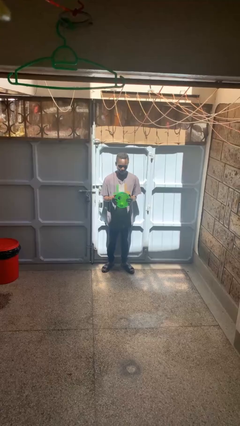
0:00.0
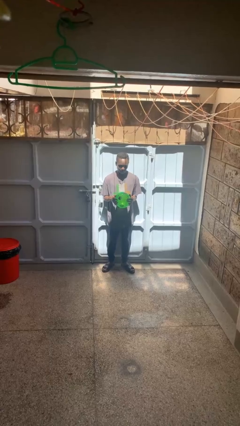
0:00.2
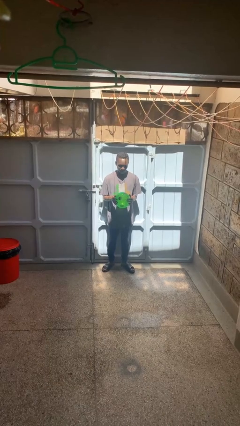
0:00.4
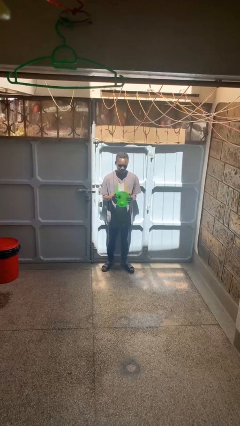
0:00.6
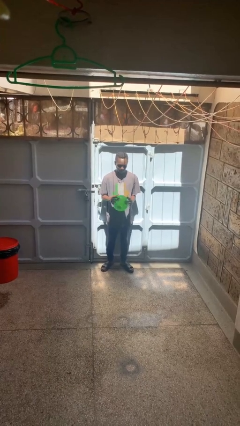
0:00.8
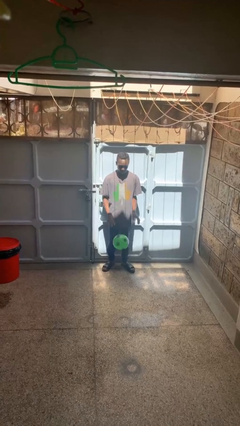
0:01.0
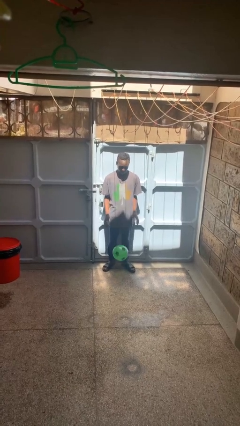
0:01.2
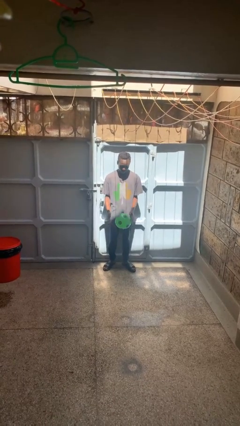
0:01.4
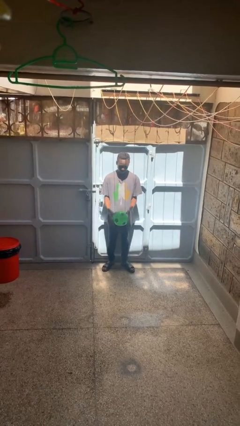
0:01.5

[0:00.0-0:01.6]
person bounces ball on floor

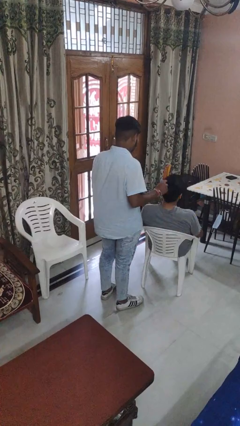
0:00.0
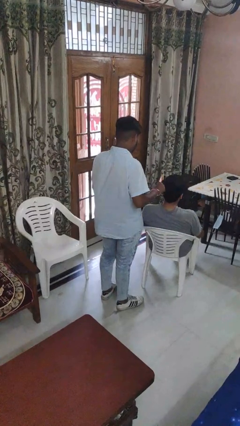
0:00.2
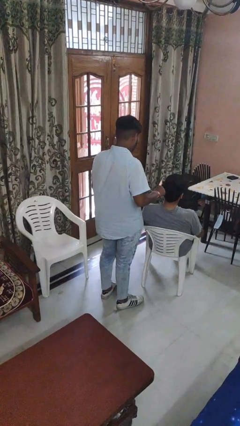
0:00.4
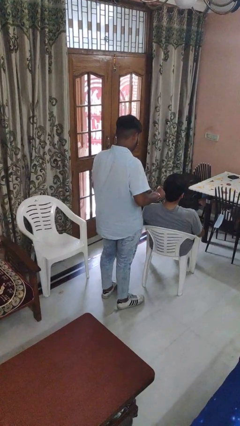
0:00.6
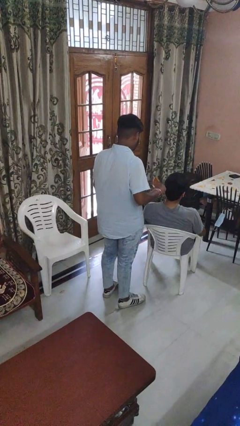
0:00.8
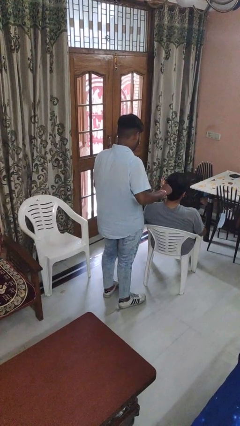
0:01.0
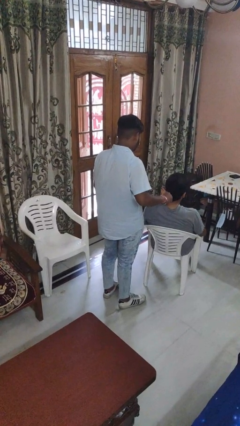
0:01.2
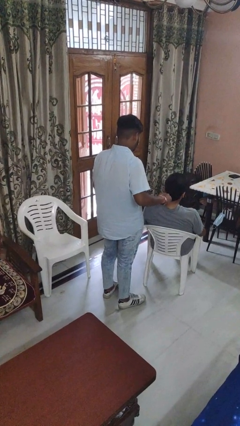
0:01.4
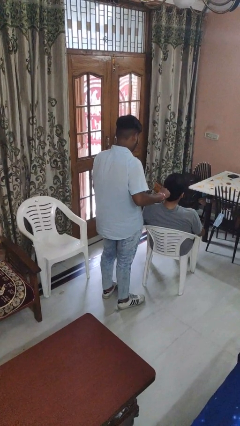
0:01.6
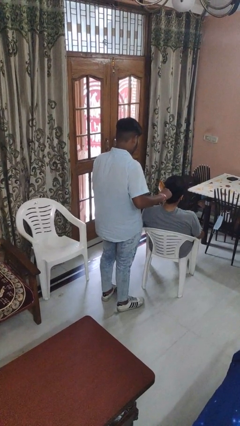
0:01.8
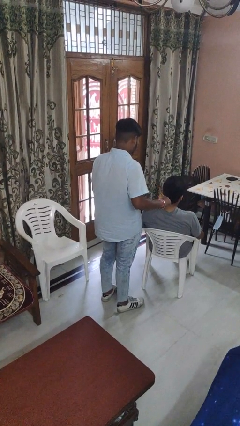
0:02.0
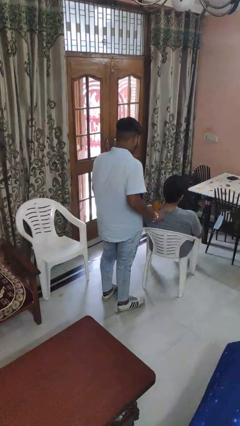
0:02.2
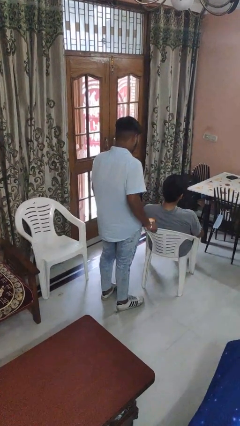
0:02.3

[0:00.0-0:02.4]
person brushes hair of person

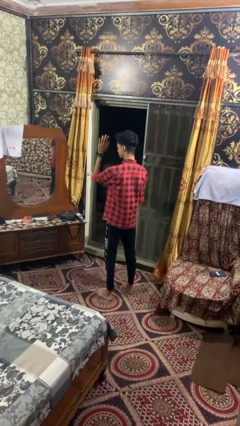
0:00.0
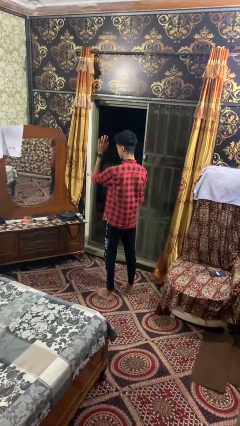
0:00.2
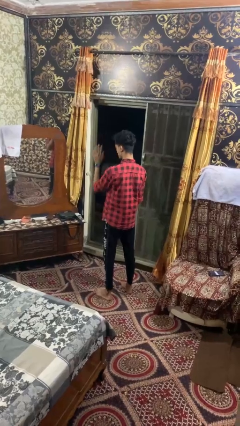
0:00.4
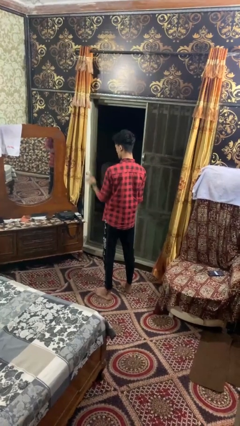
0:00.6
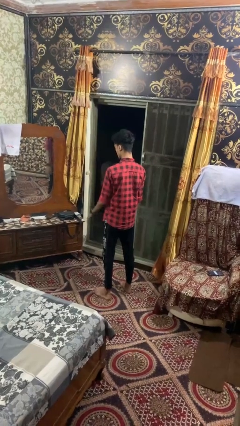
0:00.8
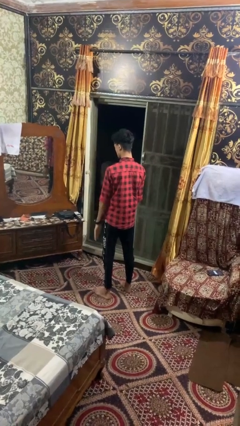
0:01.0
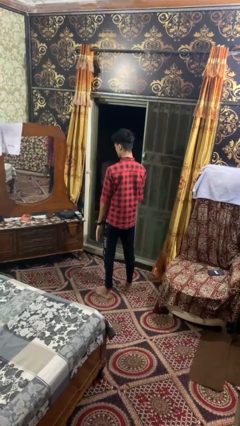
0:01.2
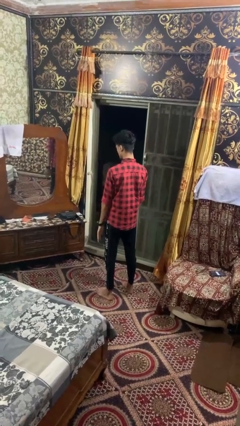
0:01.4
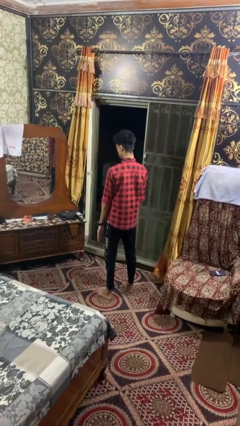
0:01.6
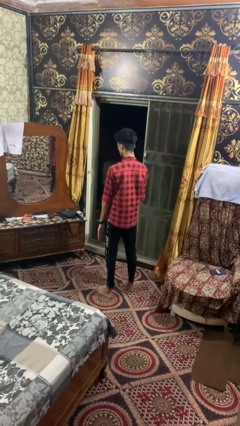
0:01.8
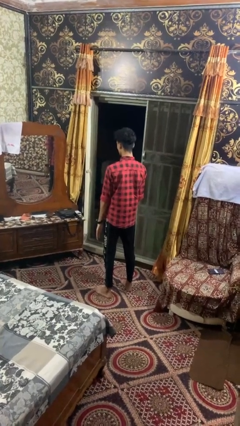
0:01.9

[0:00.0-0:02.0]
person gestures lower hand

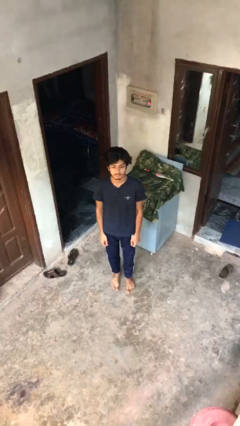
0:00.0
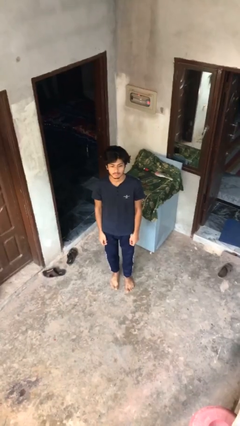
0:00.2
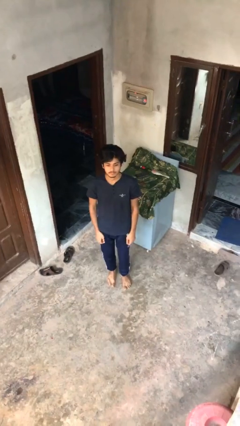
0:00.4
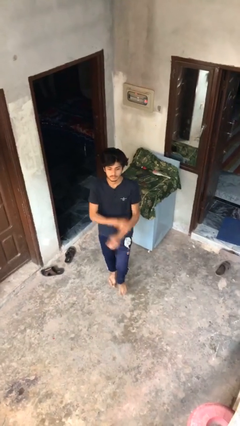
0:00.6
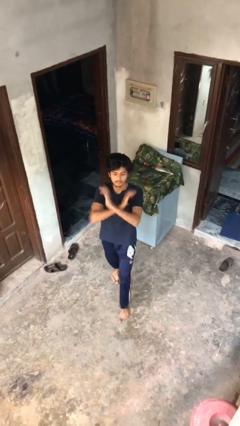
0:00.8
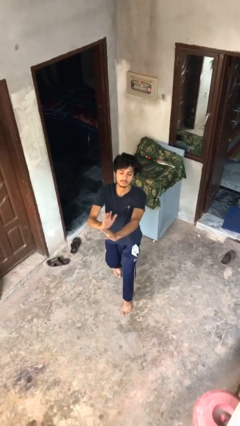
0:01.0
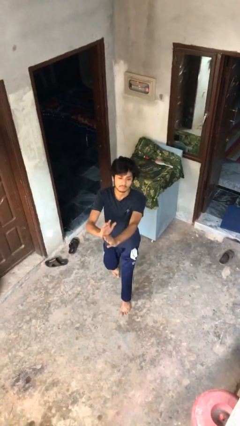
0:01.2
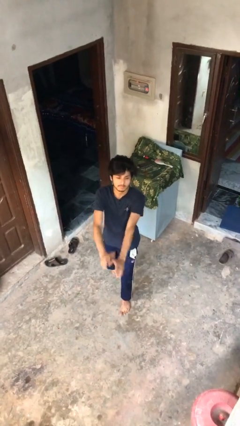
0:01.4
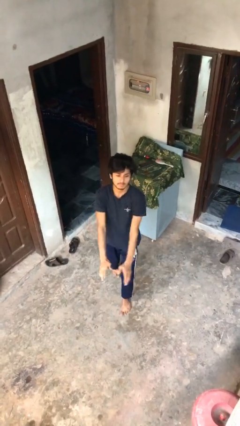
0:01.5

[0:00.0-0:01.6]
person karate chop

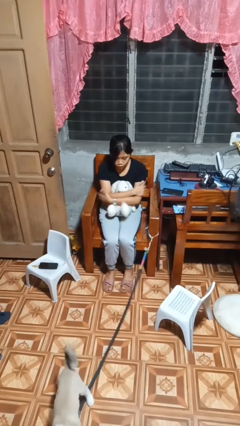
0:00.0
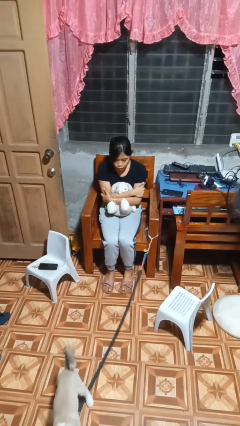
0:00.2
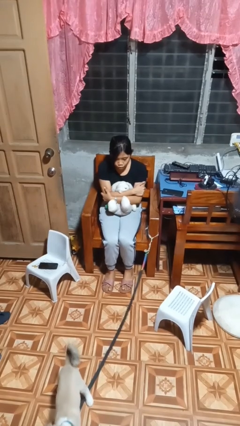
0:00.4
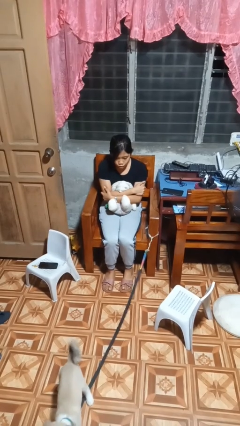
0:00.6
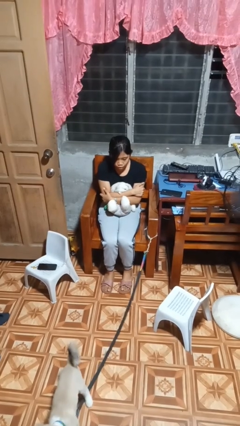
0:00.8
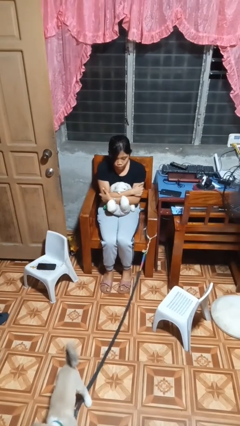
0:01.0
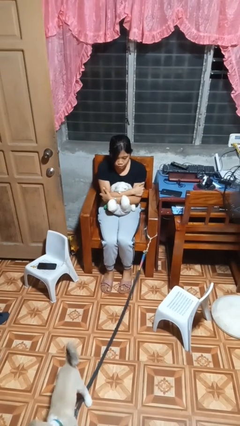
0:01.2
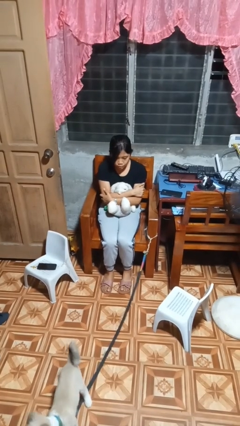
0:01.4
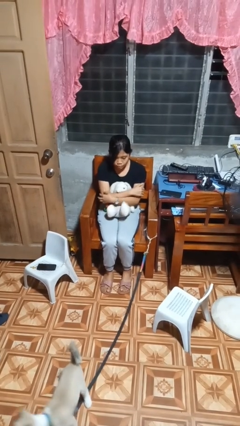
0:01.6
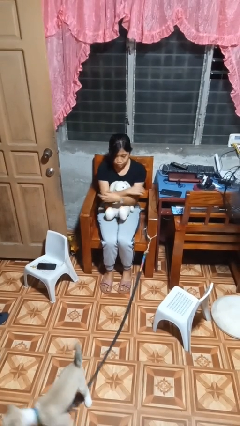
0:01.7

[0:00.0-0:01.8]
person hugs stuffed animal

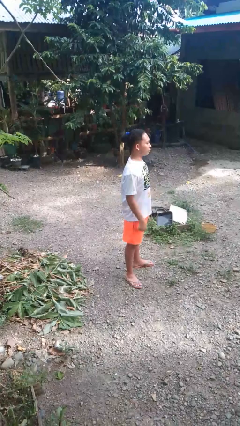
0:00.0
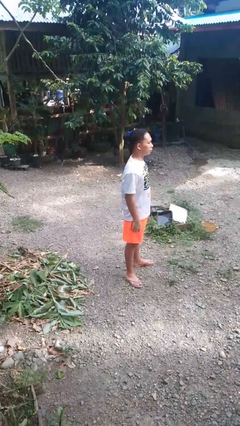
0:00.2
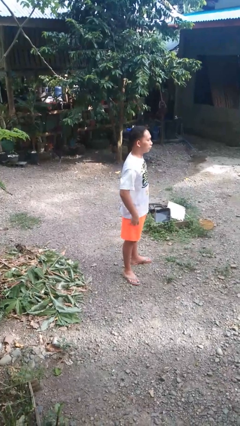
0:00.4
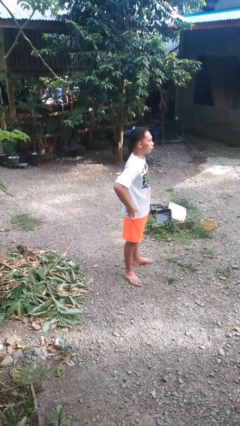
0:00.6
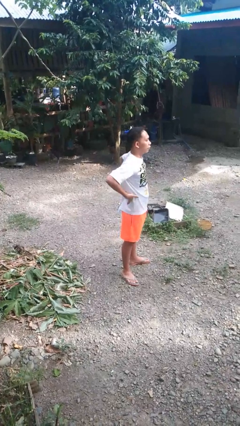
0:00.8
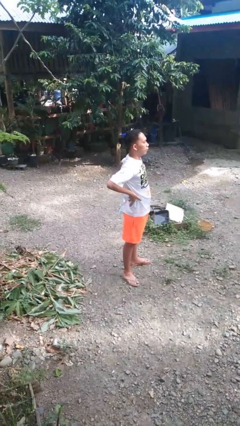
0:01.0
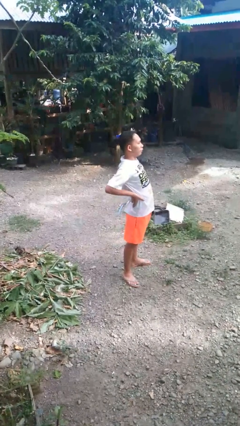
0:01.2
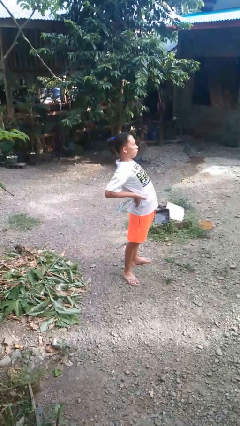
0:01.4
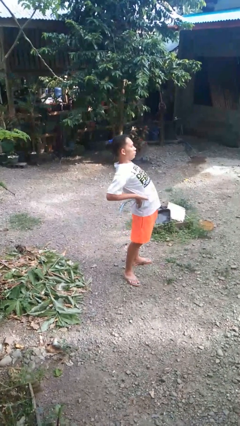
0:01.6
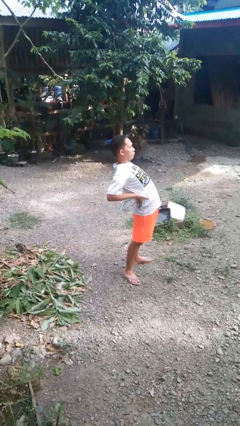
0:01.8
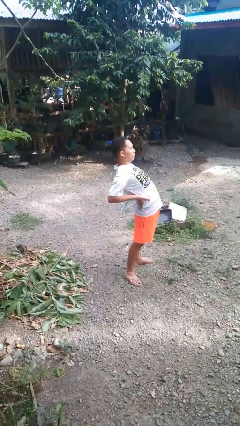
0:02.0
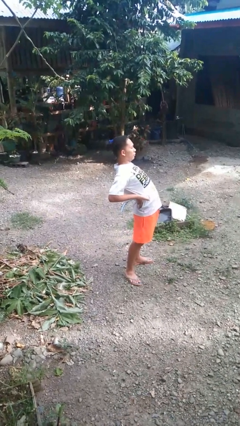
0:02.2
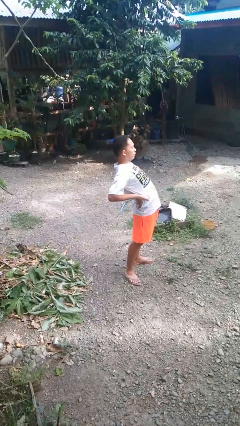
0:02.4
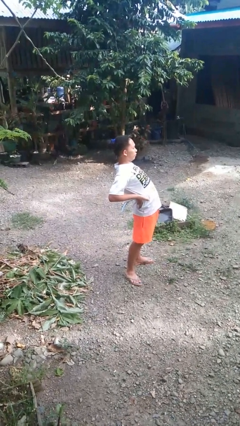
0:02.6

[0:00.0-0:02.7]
person stretches back

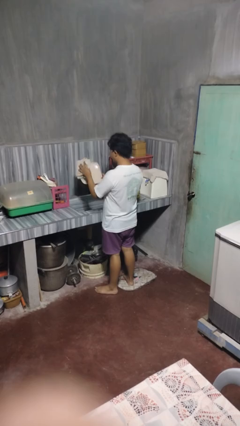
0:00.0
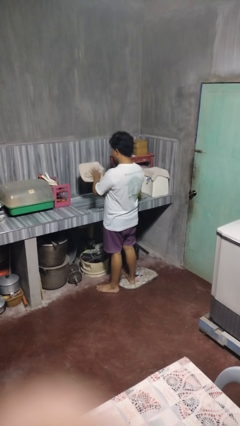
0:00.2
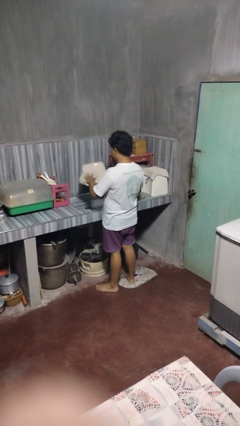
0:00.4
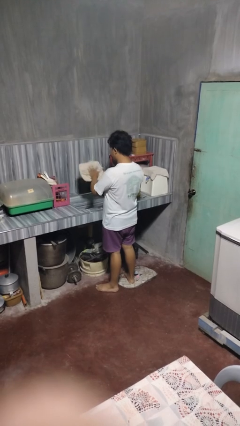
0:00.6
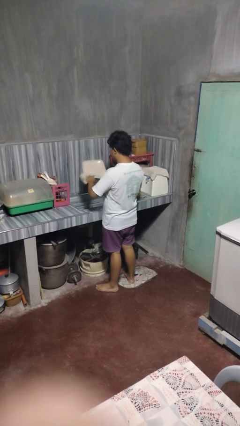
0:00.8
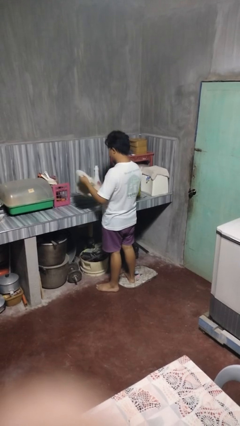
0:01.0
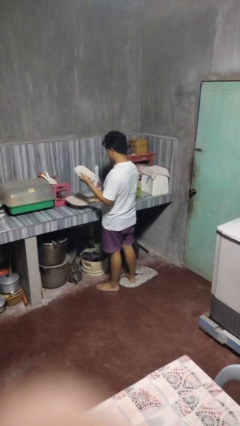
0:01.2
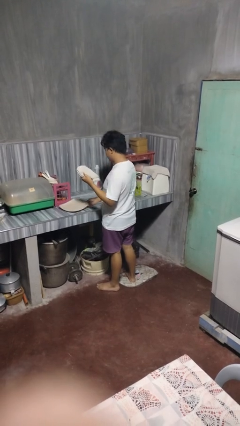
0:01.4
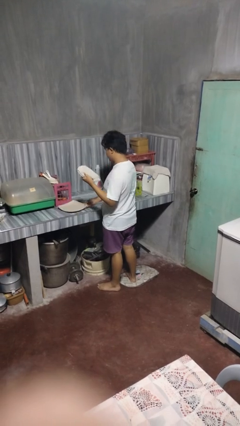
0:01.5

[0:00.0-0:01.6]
person dries dish

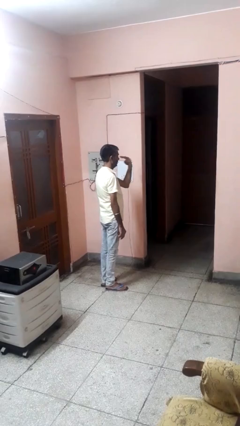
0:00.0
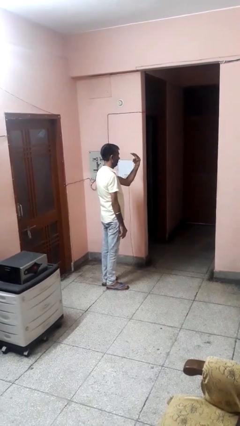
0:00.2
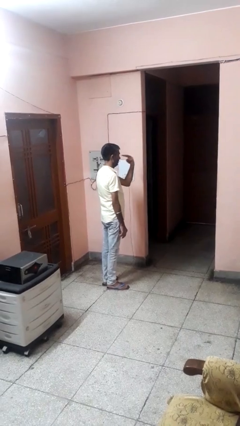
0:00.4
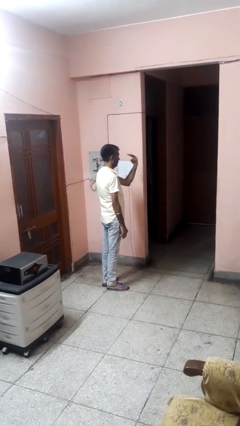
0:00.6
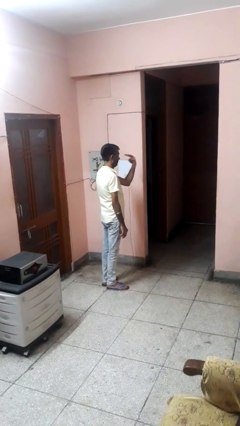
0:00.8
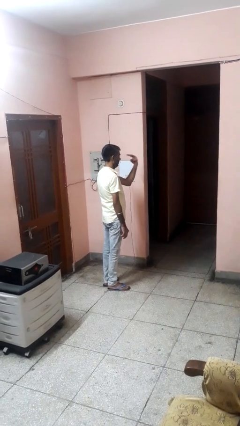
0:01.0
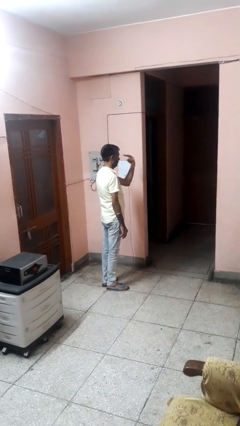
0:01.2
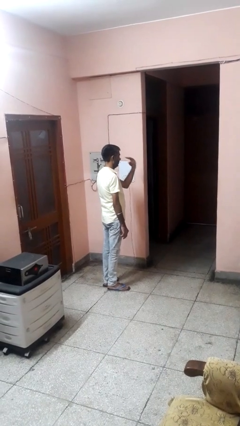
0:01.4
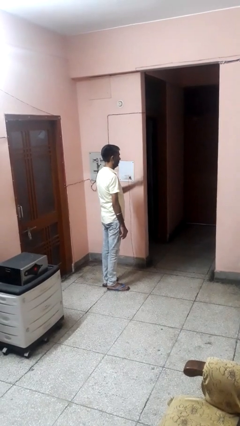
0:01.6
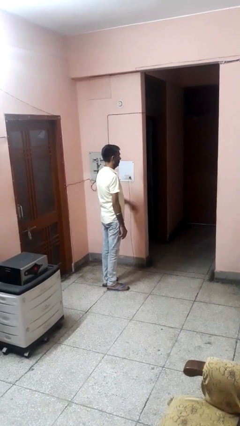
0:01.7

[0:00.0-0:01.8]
person gestures watch closely

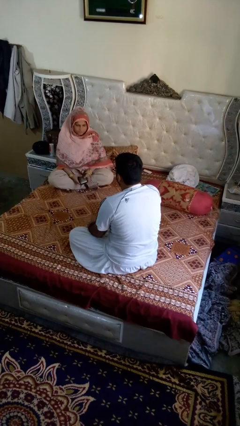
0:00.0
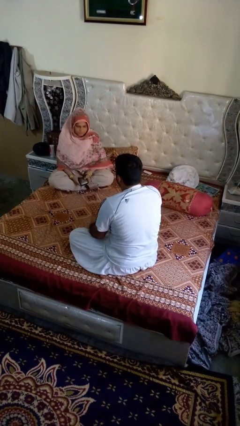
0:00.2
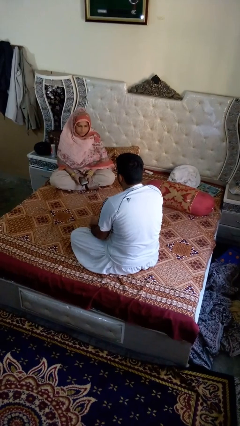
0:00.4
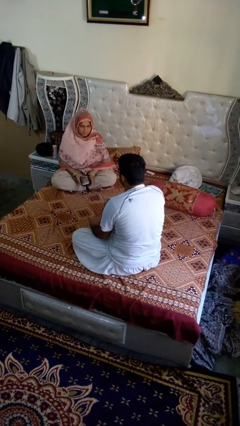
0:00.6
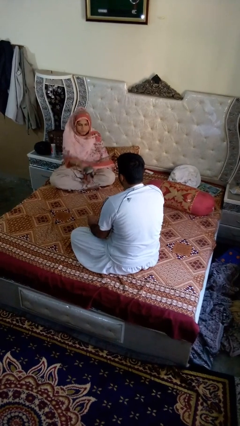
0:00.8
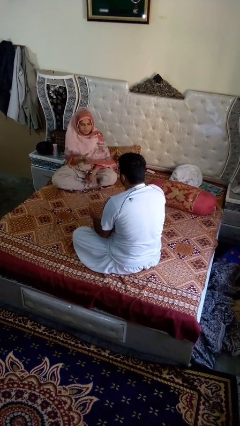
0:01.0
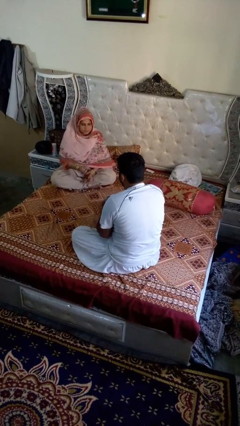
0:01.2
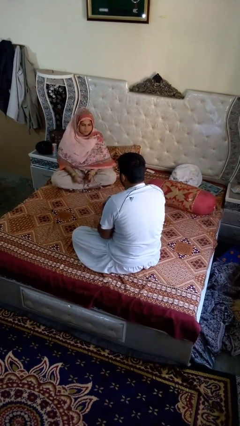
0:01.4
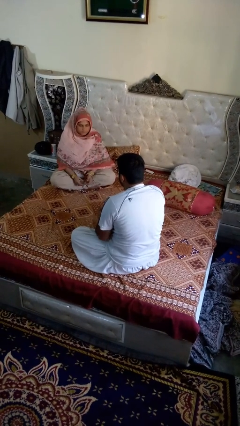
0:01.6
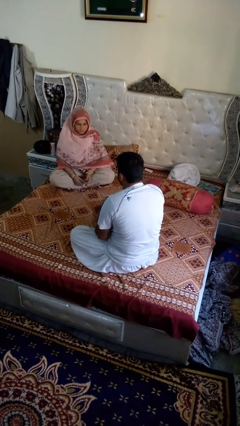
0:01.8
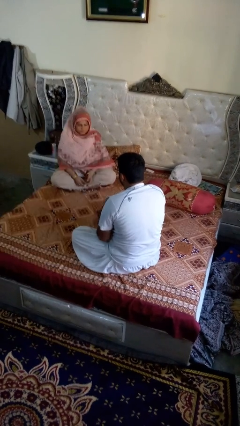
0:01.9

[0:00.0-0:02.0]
person catches object from person
